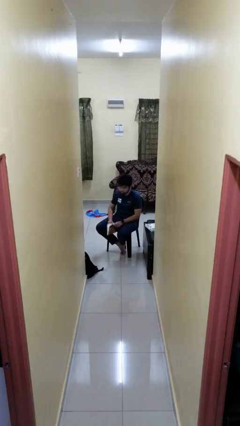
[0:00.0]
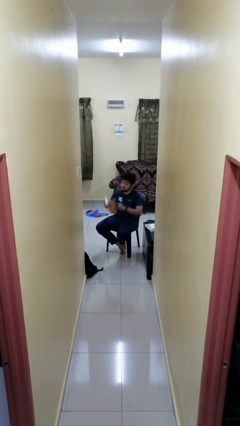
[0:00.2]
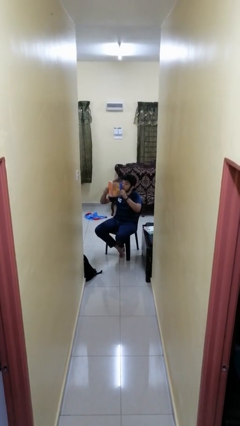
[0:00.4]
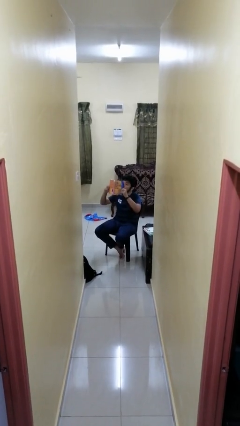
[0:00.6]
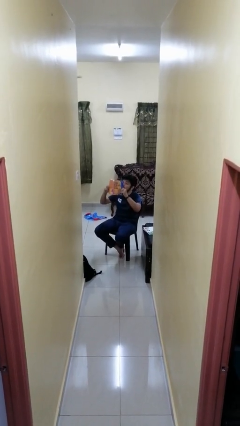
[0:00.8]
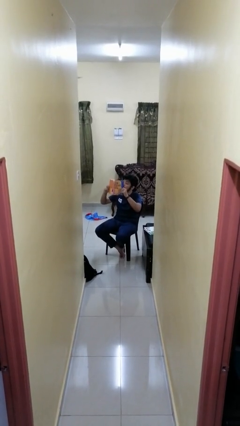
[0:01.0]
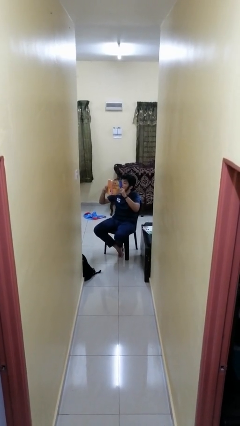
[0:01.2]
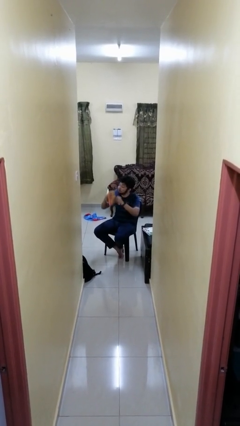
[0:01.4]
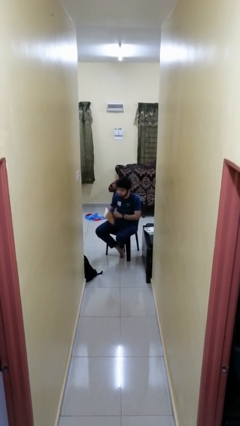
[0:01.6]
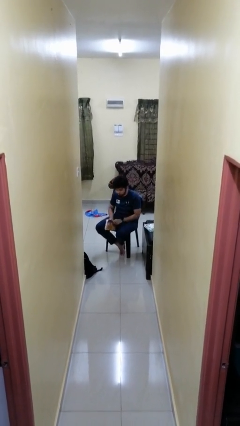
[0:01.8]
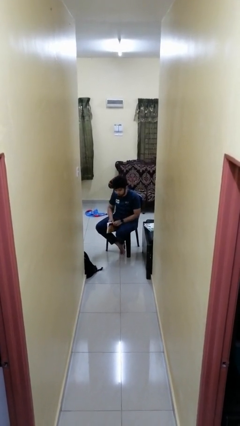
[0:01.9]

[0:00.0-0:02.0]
person reads book

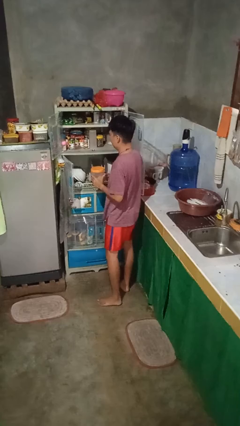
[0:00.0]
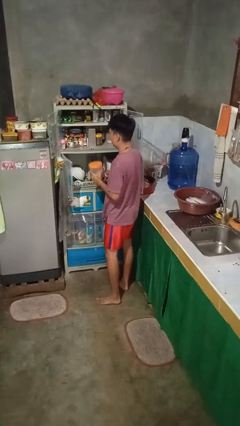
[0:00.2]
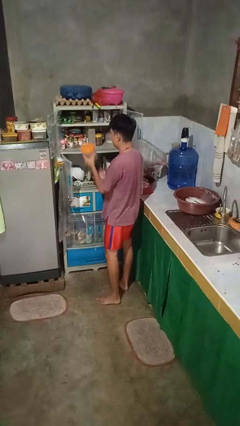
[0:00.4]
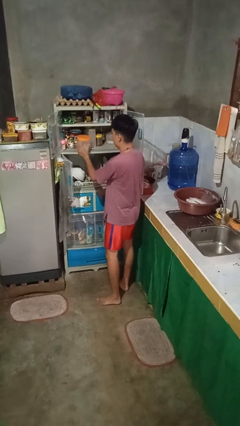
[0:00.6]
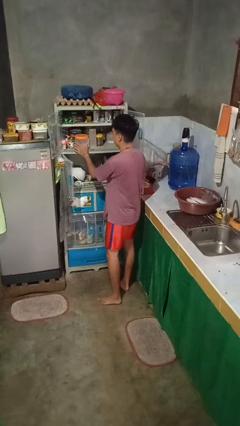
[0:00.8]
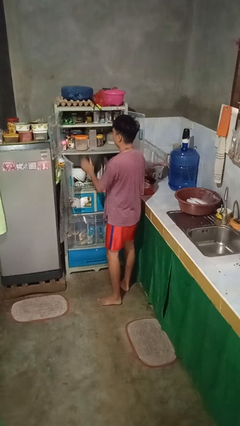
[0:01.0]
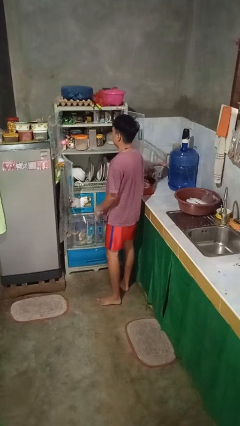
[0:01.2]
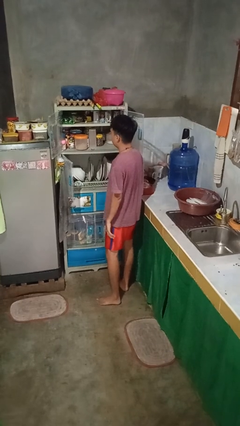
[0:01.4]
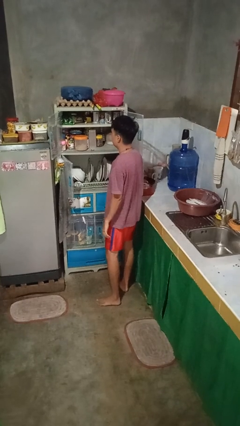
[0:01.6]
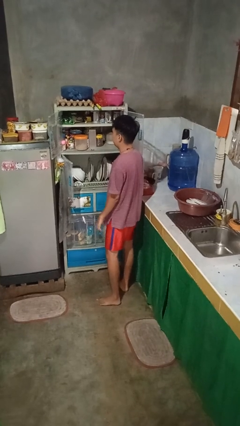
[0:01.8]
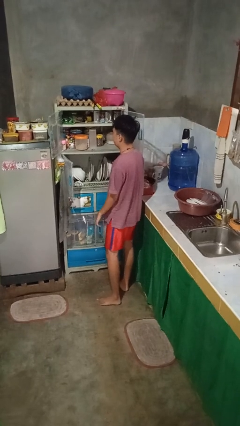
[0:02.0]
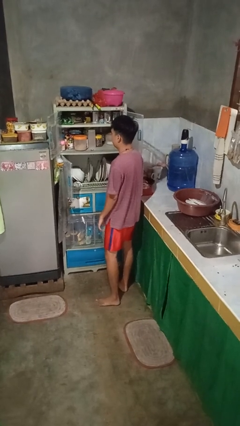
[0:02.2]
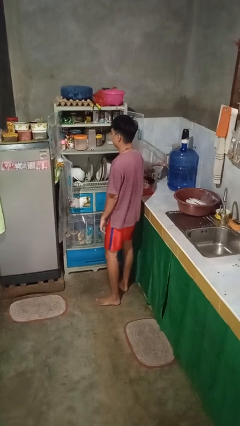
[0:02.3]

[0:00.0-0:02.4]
person puts object in cabinet

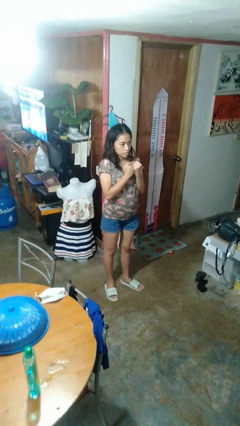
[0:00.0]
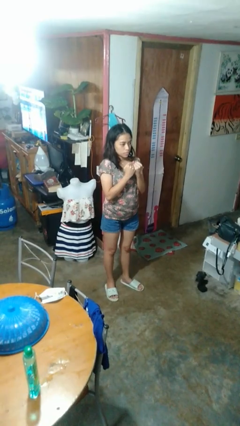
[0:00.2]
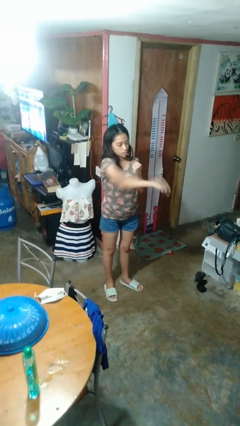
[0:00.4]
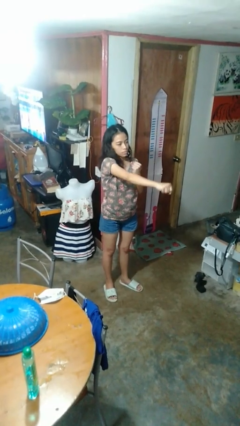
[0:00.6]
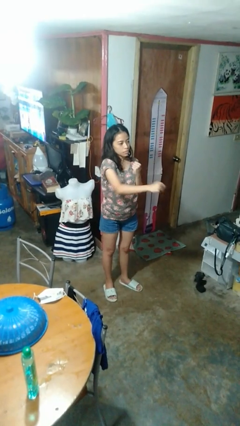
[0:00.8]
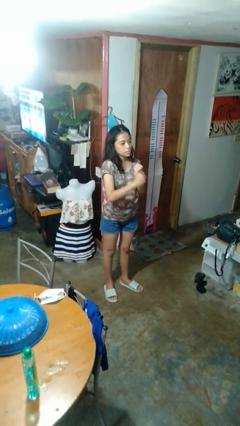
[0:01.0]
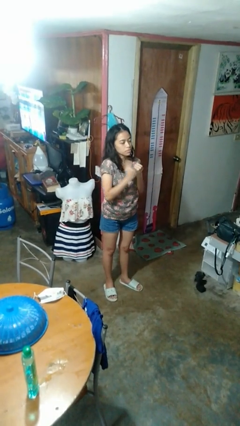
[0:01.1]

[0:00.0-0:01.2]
person punches

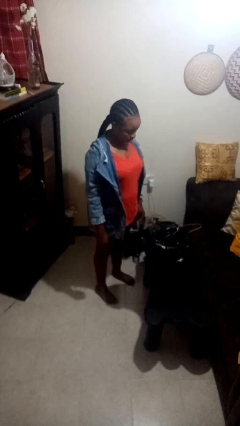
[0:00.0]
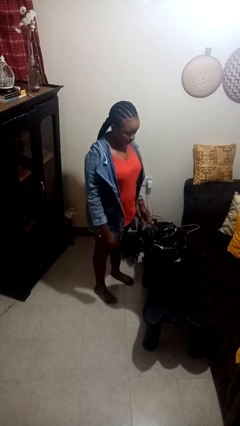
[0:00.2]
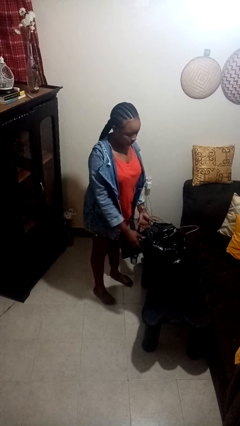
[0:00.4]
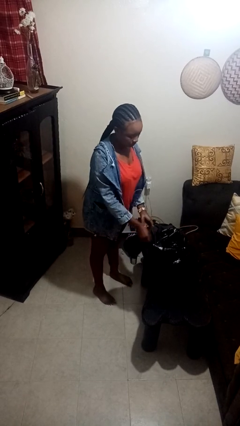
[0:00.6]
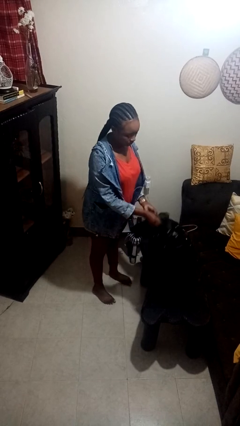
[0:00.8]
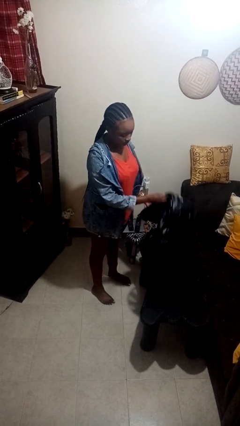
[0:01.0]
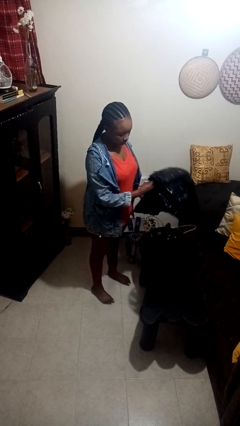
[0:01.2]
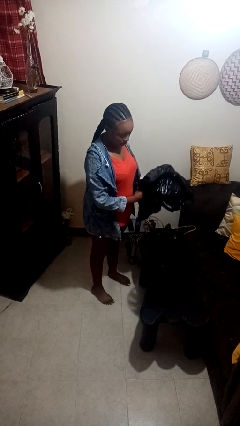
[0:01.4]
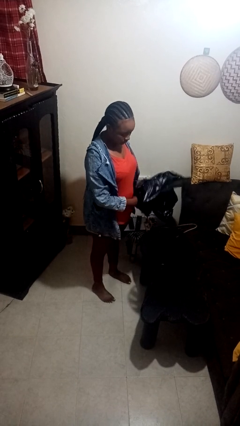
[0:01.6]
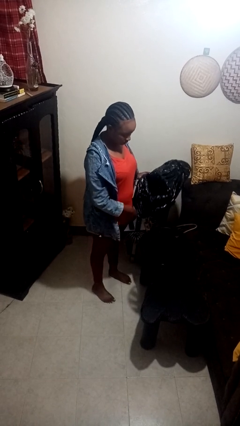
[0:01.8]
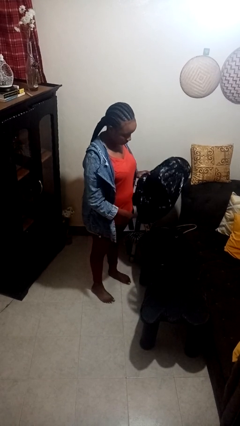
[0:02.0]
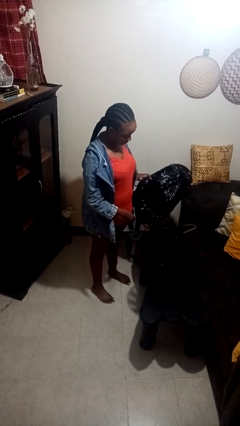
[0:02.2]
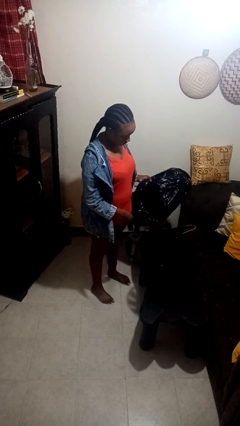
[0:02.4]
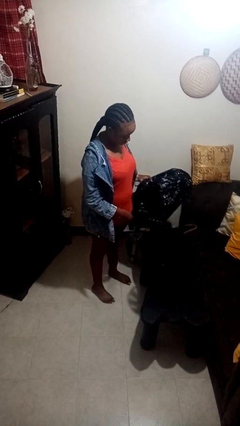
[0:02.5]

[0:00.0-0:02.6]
person removes trashbag from trashcan

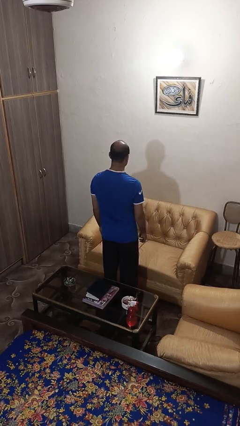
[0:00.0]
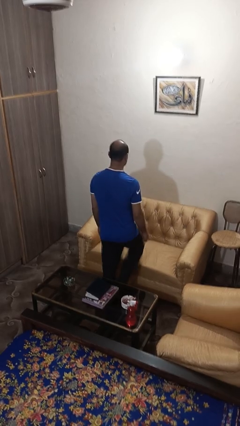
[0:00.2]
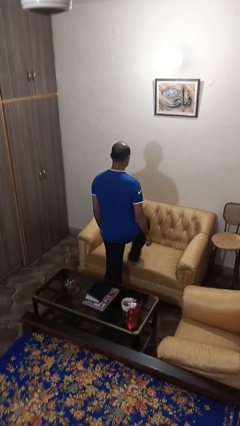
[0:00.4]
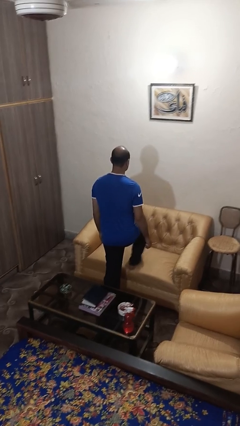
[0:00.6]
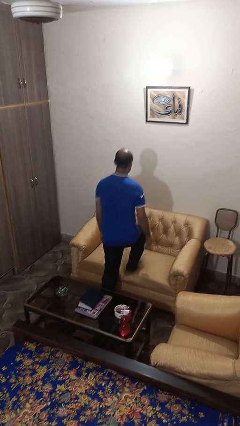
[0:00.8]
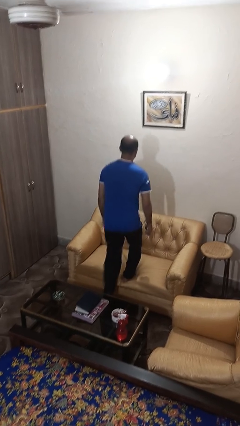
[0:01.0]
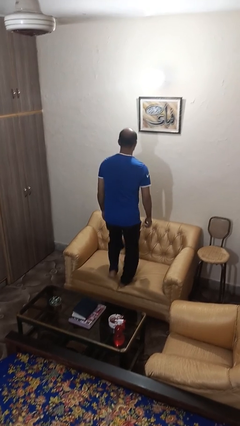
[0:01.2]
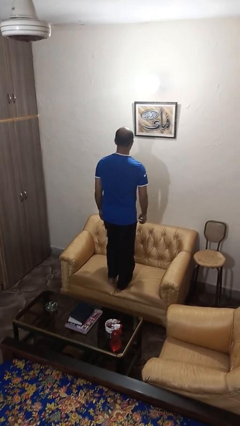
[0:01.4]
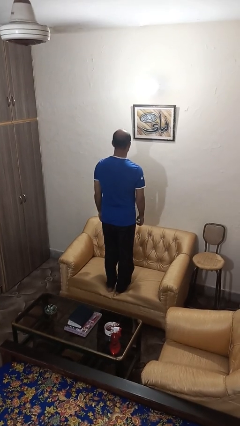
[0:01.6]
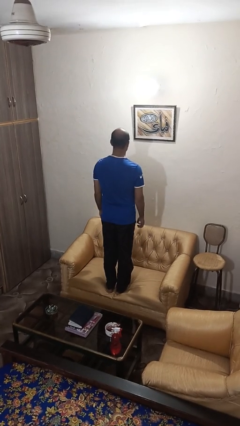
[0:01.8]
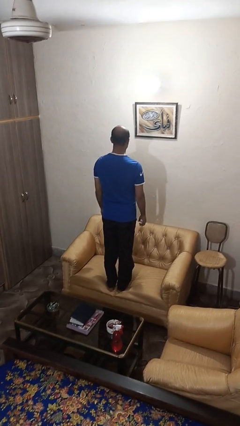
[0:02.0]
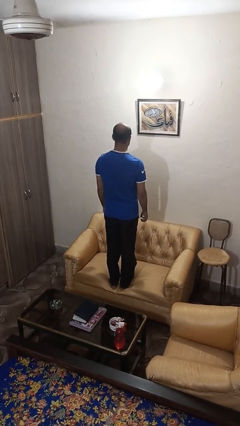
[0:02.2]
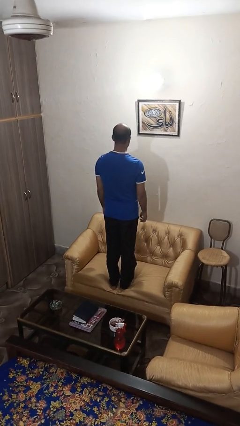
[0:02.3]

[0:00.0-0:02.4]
person climbs on couch

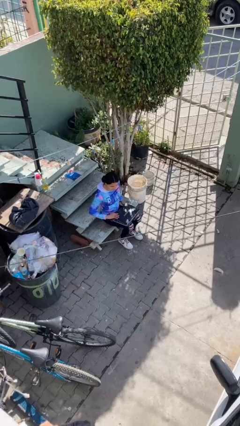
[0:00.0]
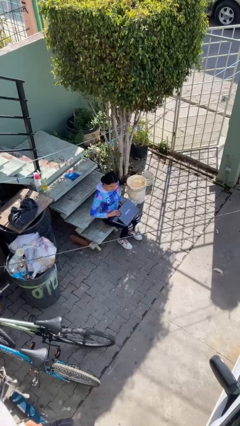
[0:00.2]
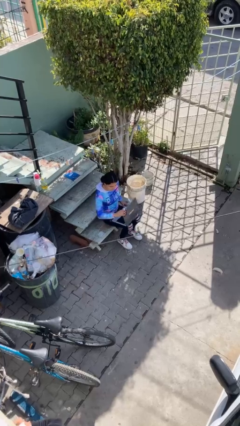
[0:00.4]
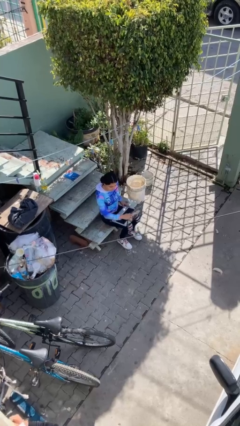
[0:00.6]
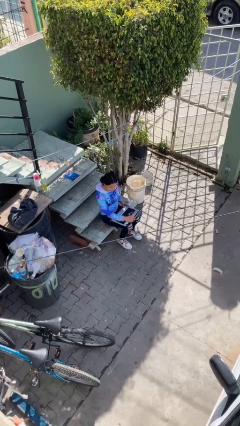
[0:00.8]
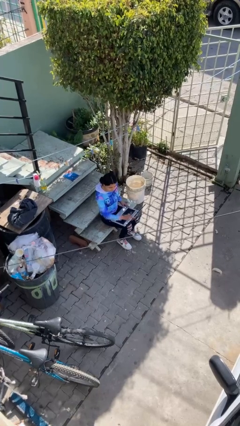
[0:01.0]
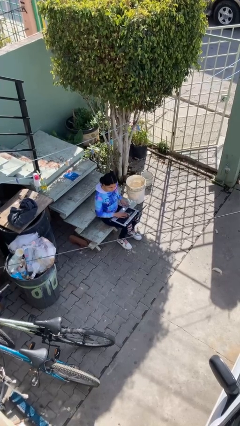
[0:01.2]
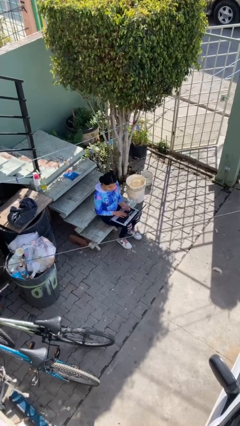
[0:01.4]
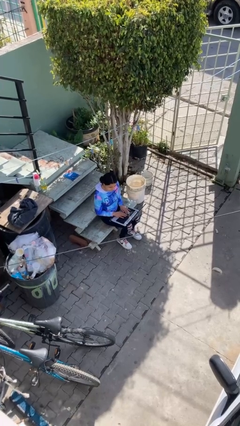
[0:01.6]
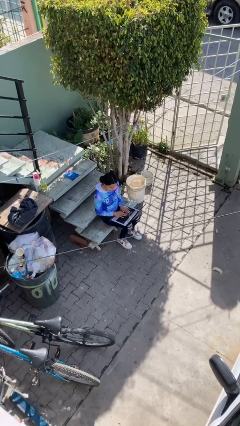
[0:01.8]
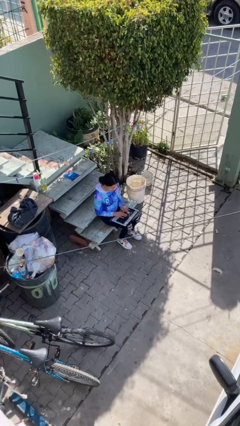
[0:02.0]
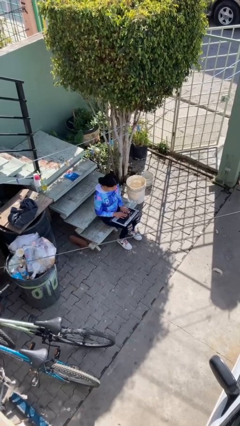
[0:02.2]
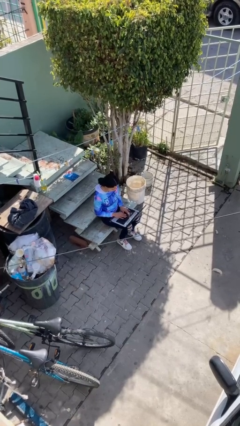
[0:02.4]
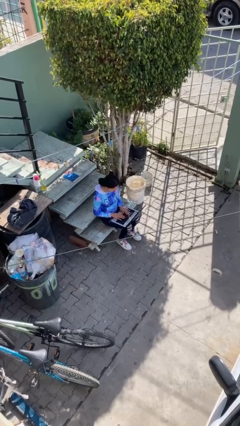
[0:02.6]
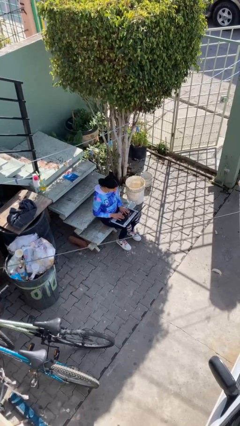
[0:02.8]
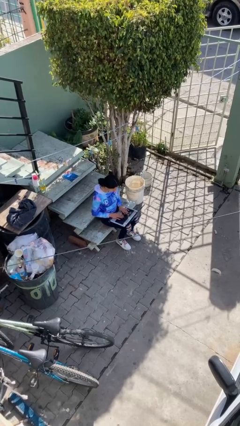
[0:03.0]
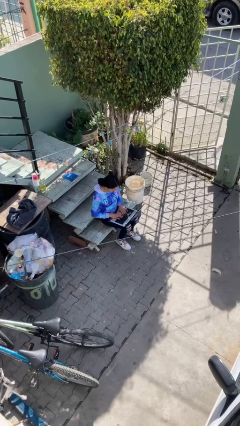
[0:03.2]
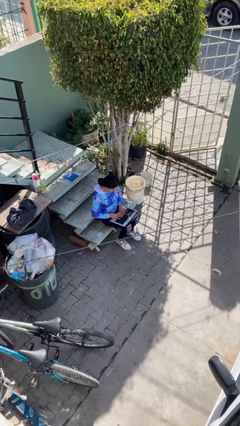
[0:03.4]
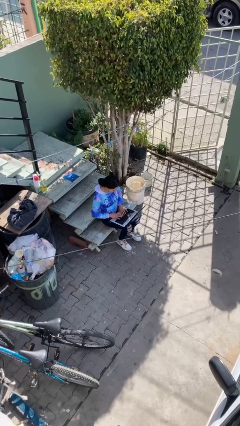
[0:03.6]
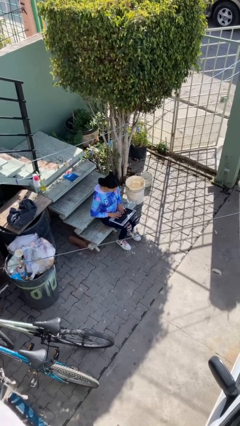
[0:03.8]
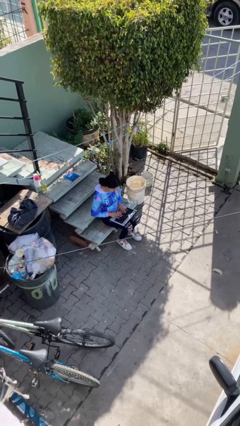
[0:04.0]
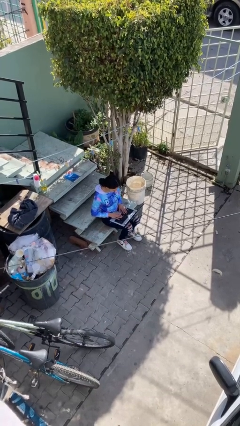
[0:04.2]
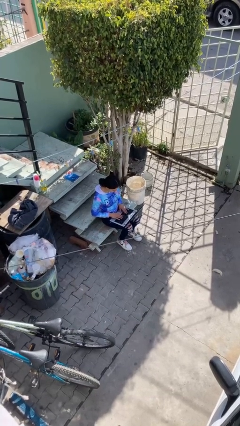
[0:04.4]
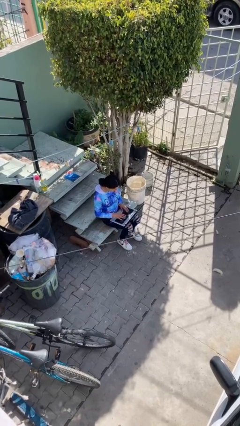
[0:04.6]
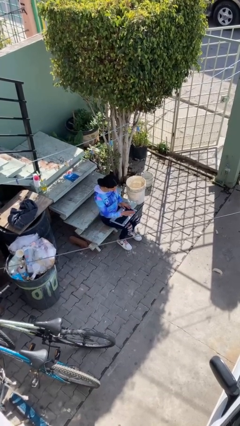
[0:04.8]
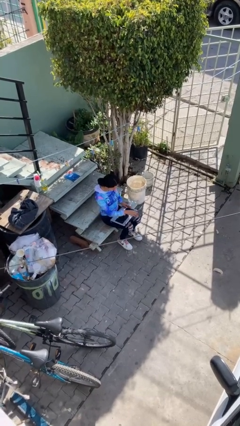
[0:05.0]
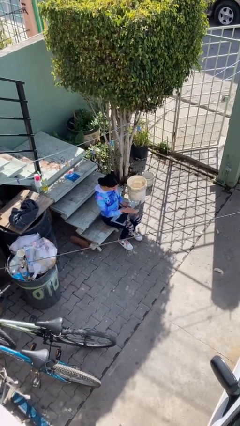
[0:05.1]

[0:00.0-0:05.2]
person interacts with laptop

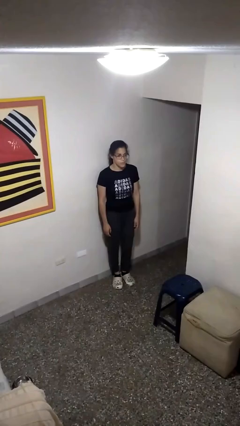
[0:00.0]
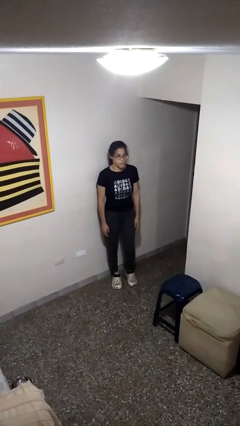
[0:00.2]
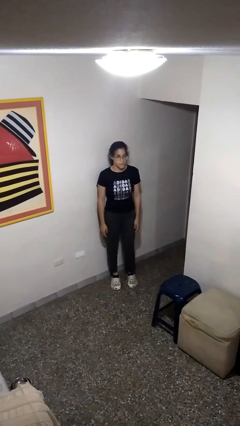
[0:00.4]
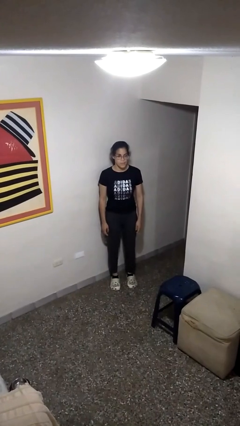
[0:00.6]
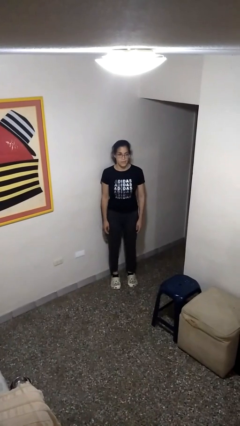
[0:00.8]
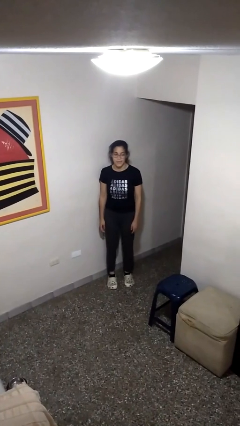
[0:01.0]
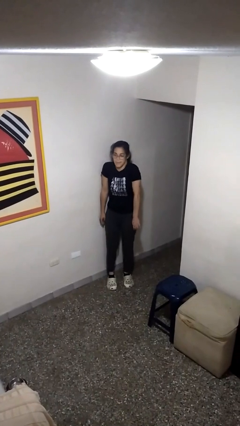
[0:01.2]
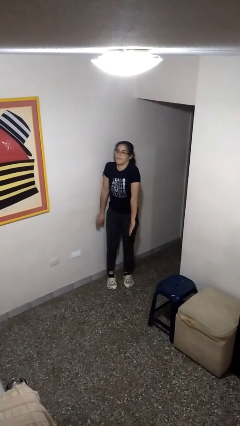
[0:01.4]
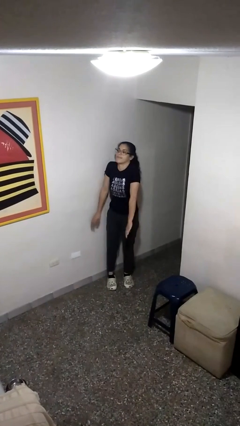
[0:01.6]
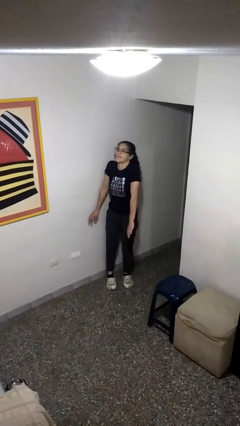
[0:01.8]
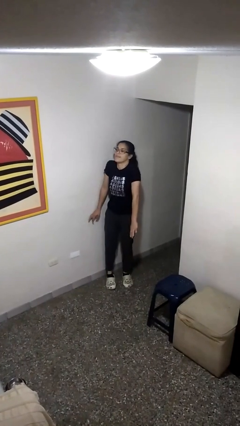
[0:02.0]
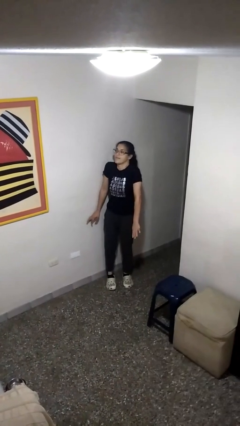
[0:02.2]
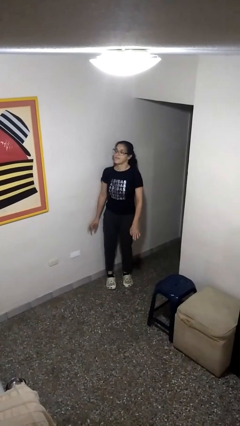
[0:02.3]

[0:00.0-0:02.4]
person shrugs
